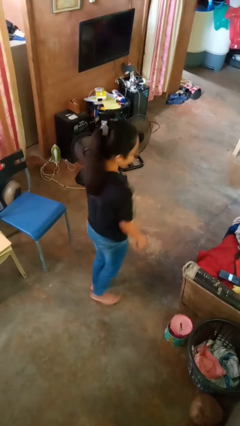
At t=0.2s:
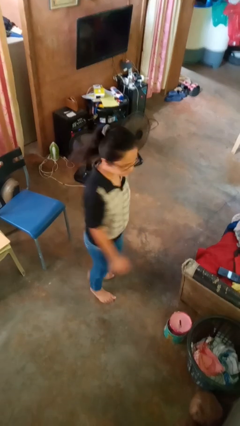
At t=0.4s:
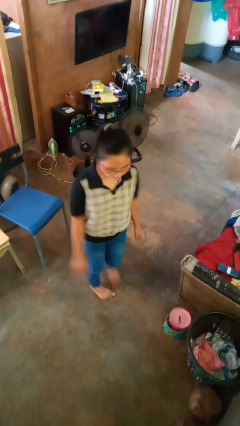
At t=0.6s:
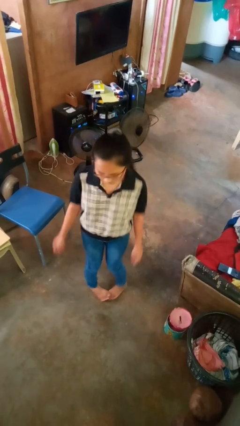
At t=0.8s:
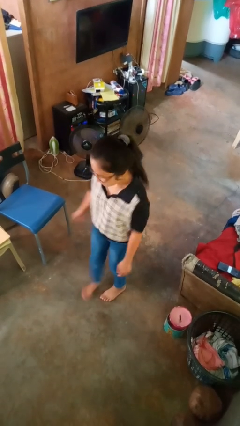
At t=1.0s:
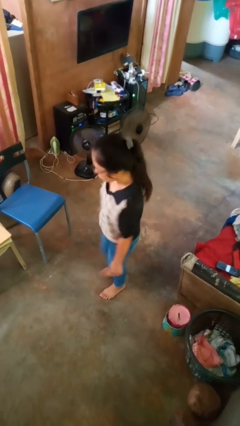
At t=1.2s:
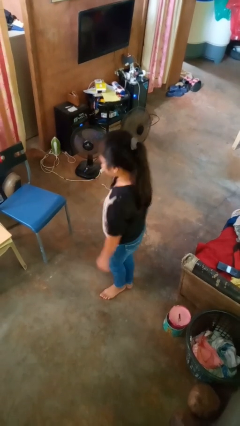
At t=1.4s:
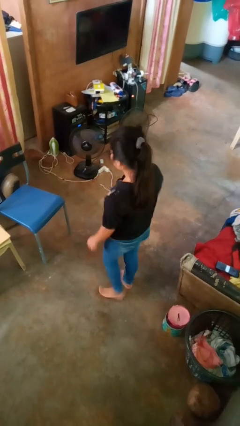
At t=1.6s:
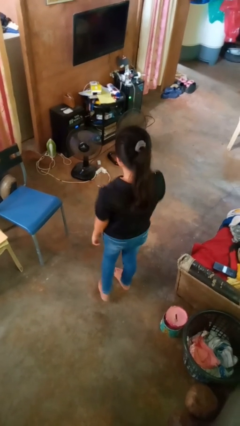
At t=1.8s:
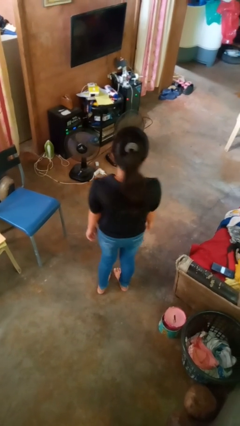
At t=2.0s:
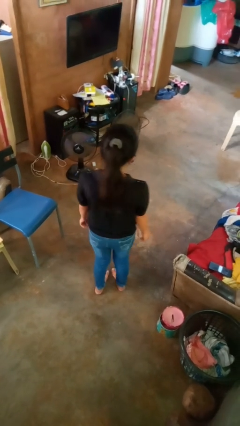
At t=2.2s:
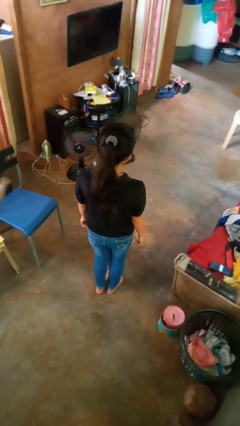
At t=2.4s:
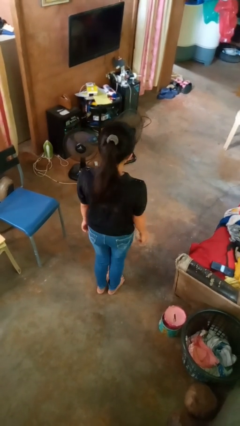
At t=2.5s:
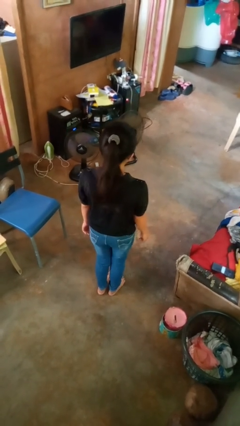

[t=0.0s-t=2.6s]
person twirls

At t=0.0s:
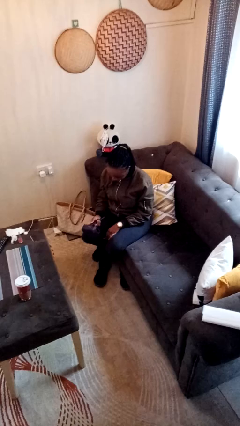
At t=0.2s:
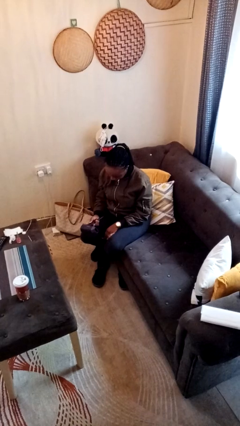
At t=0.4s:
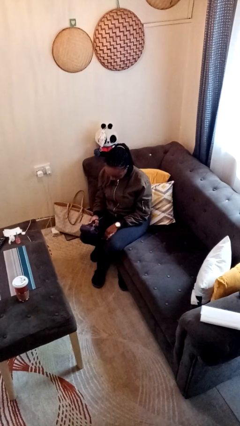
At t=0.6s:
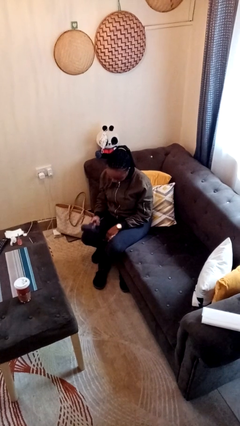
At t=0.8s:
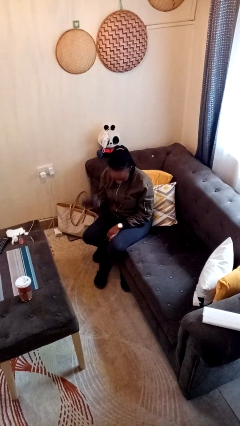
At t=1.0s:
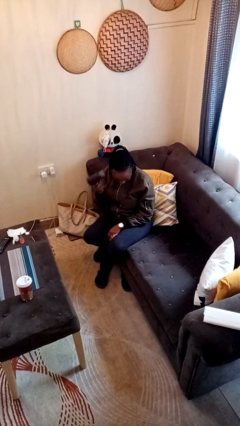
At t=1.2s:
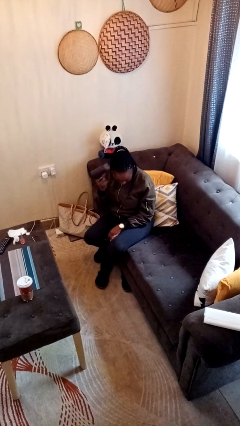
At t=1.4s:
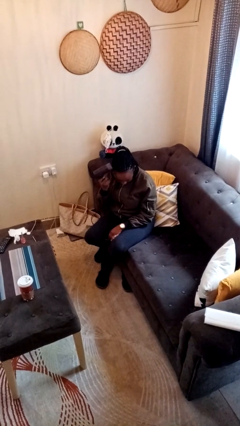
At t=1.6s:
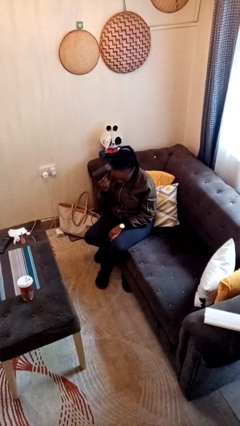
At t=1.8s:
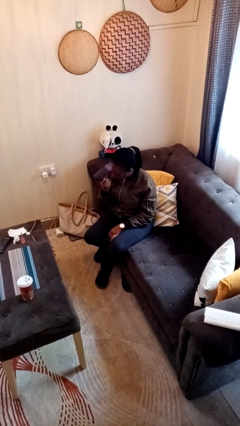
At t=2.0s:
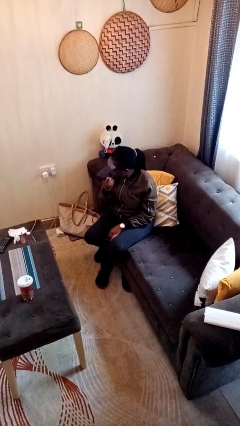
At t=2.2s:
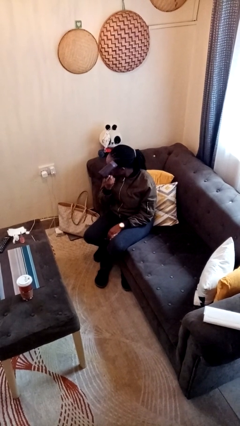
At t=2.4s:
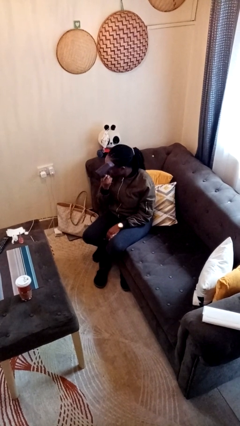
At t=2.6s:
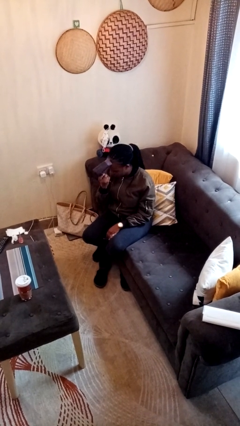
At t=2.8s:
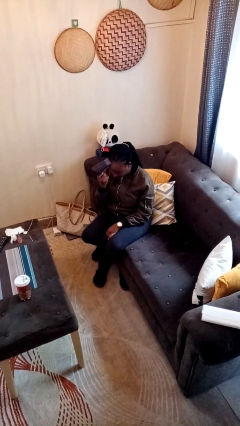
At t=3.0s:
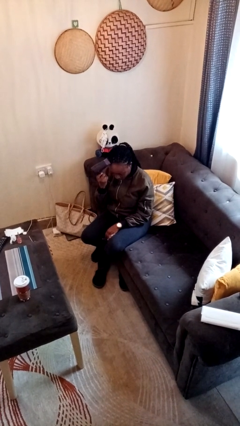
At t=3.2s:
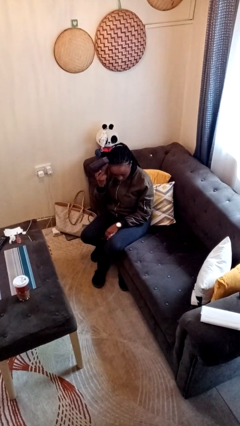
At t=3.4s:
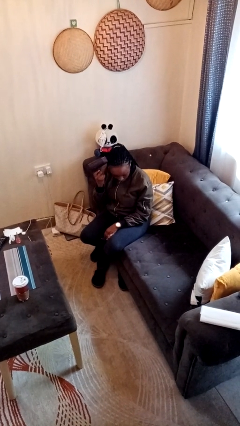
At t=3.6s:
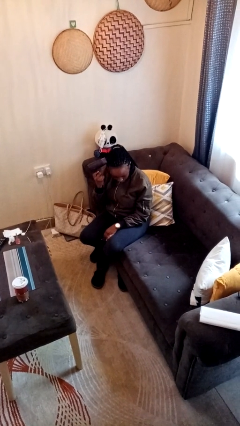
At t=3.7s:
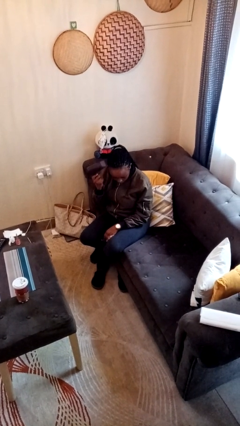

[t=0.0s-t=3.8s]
person dries hair with hairdryer

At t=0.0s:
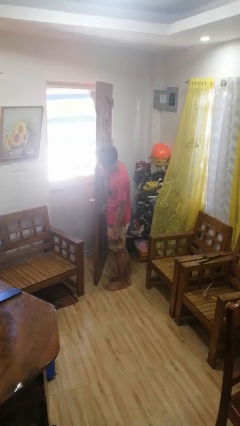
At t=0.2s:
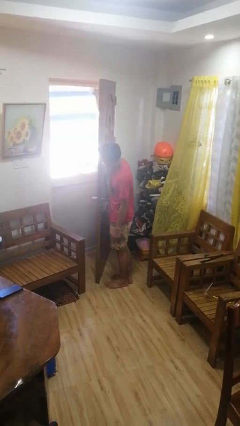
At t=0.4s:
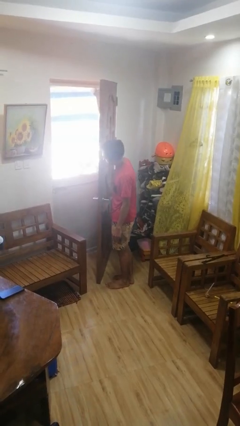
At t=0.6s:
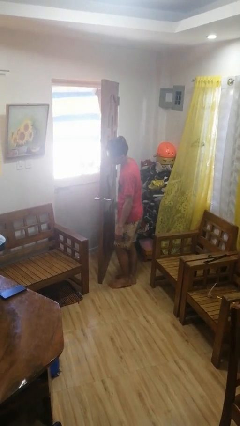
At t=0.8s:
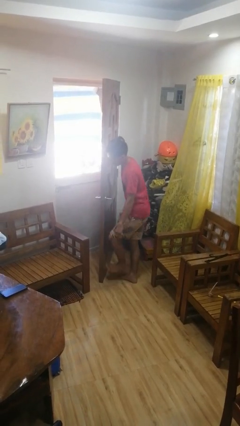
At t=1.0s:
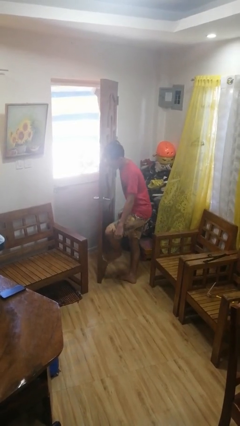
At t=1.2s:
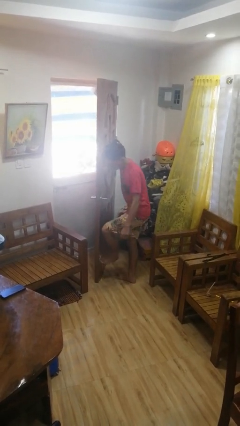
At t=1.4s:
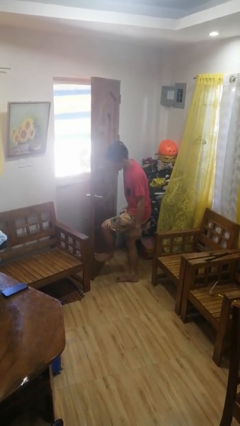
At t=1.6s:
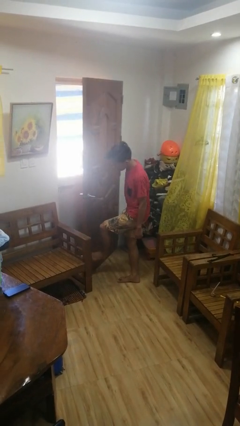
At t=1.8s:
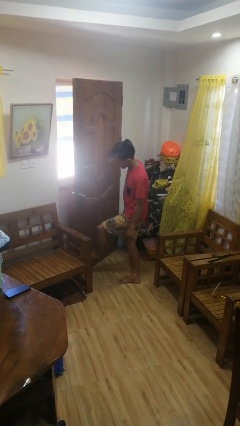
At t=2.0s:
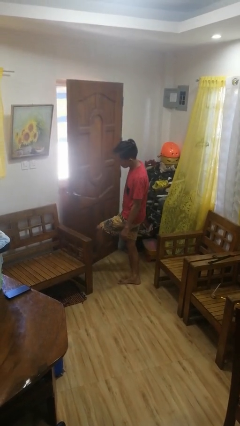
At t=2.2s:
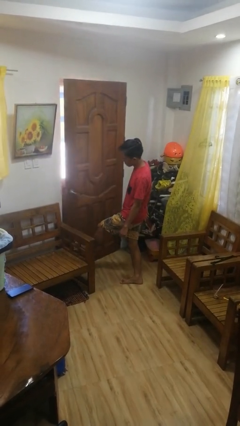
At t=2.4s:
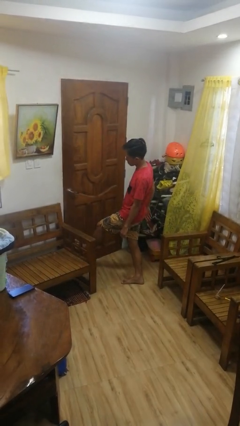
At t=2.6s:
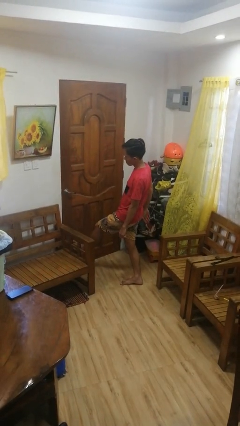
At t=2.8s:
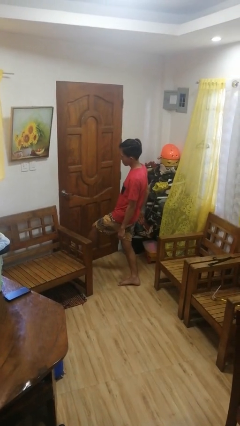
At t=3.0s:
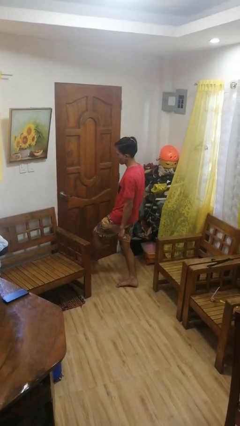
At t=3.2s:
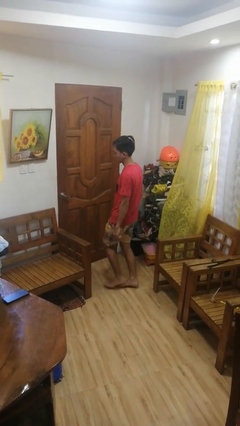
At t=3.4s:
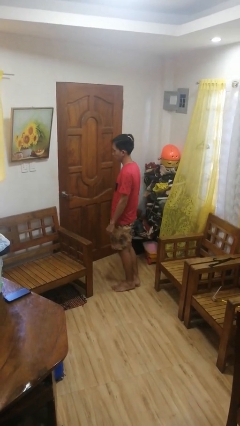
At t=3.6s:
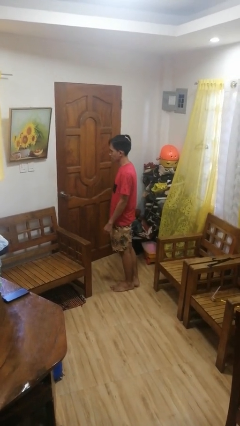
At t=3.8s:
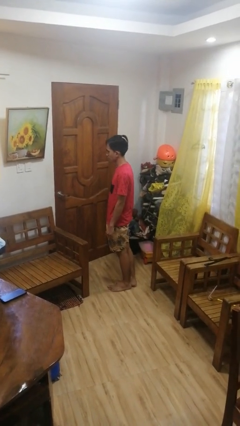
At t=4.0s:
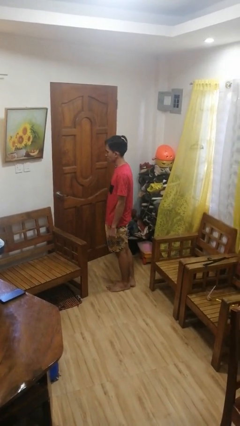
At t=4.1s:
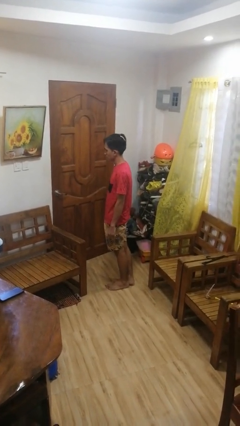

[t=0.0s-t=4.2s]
person closes door with foot

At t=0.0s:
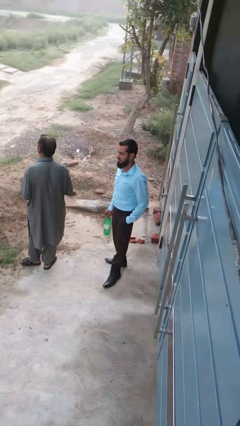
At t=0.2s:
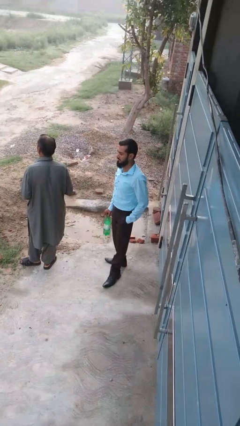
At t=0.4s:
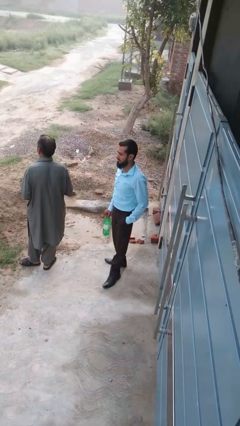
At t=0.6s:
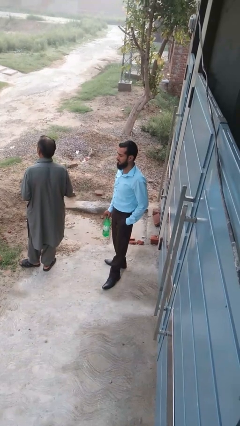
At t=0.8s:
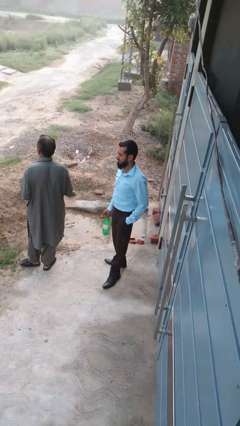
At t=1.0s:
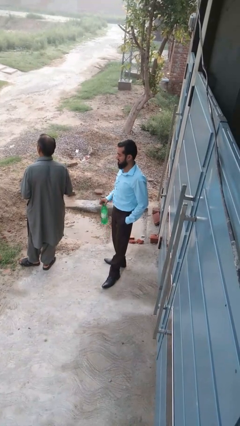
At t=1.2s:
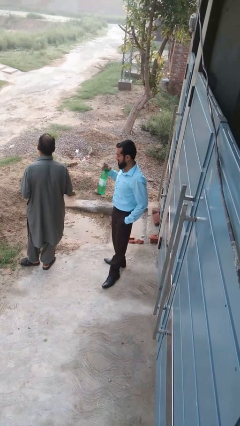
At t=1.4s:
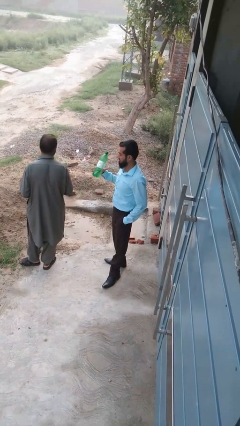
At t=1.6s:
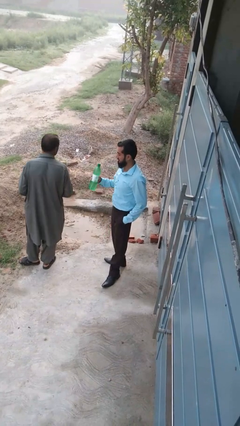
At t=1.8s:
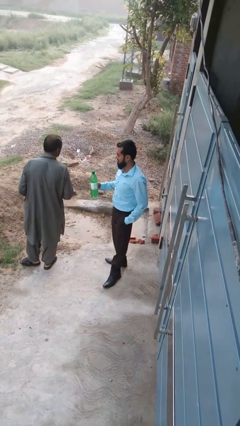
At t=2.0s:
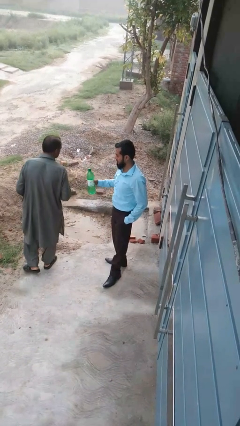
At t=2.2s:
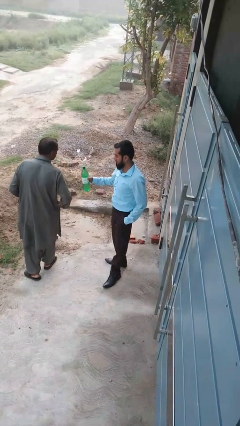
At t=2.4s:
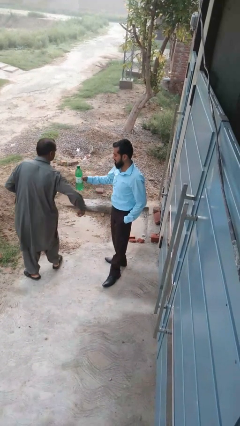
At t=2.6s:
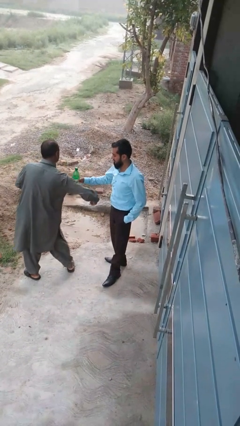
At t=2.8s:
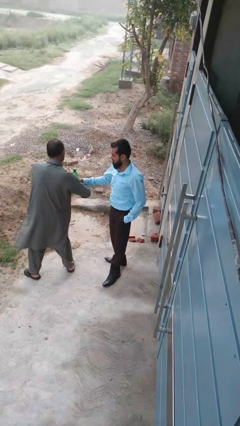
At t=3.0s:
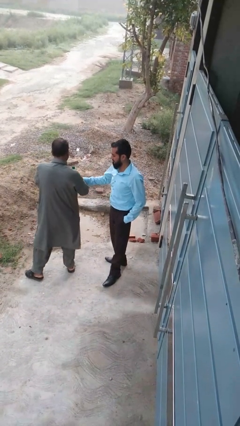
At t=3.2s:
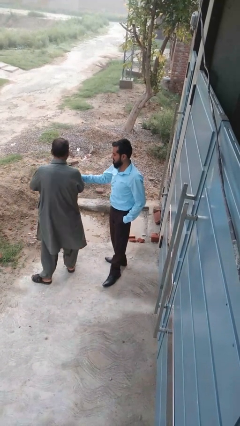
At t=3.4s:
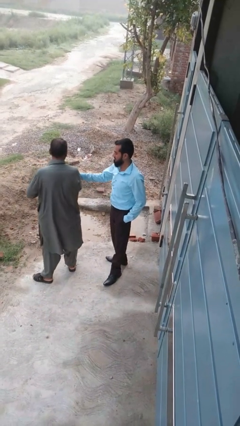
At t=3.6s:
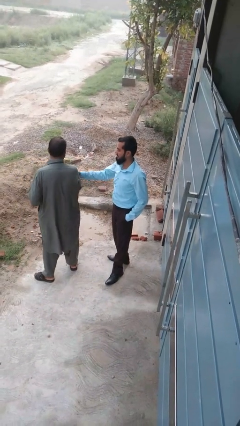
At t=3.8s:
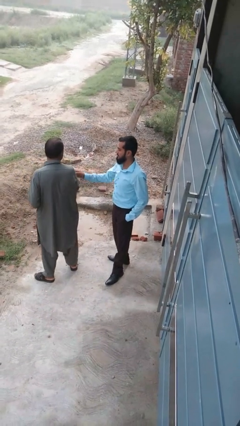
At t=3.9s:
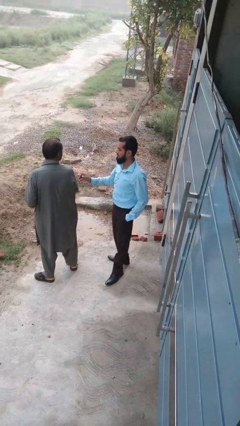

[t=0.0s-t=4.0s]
person transfers object to person

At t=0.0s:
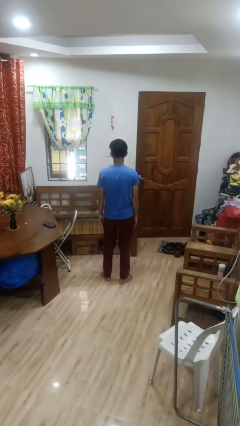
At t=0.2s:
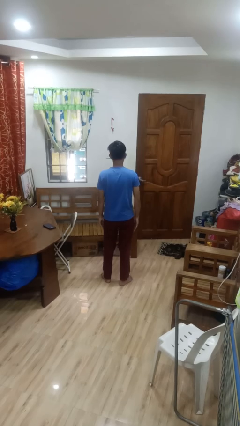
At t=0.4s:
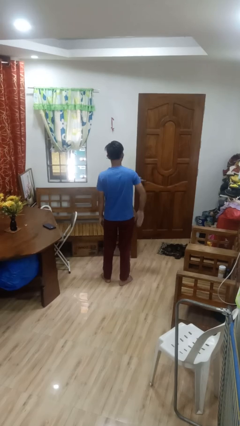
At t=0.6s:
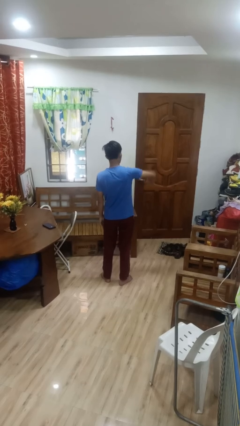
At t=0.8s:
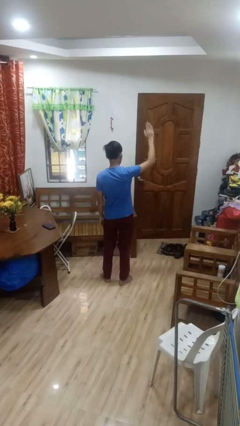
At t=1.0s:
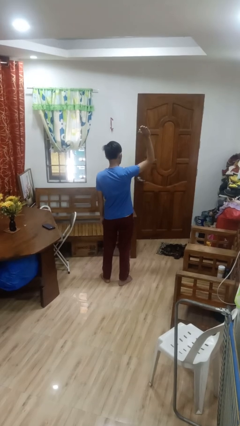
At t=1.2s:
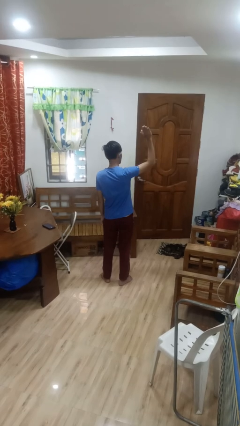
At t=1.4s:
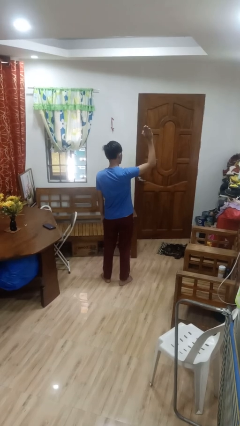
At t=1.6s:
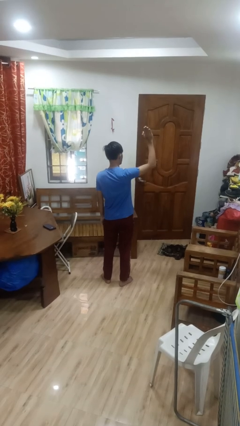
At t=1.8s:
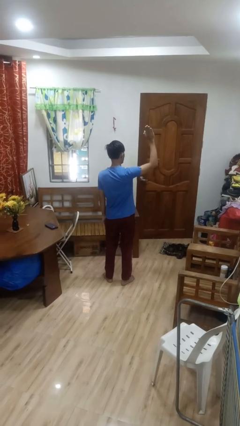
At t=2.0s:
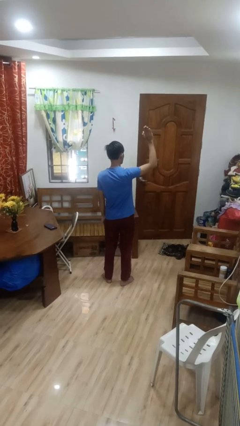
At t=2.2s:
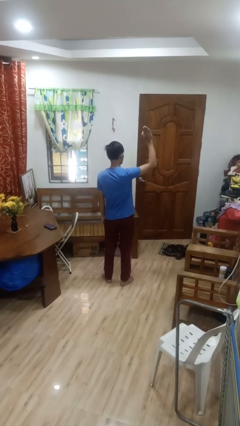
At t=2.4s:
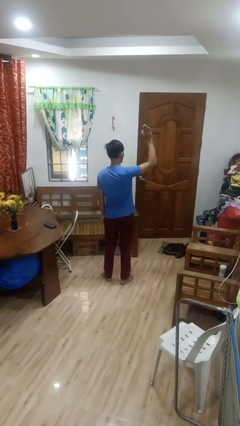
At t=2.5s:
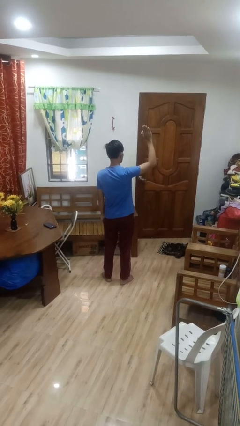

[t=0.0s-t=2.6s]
person gestures swipe up

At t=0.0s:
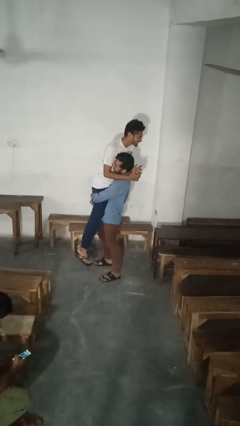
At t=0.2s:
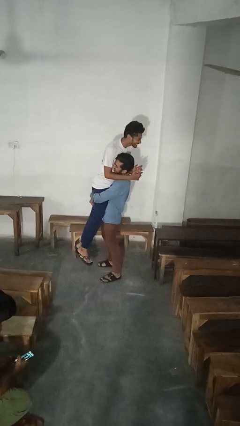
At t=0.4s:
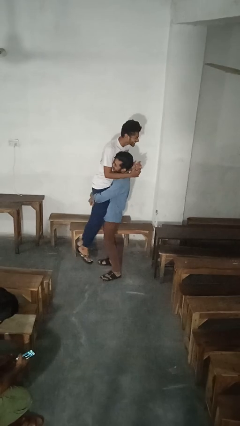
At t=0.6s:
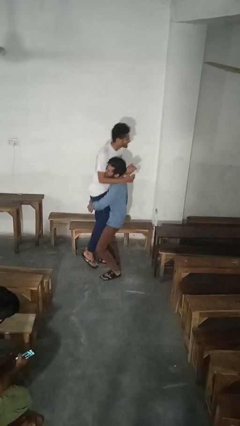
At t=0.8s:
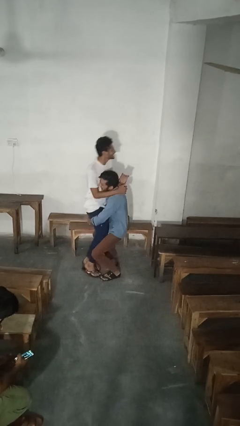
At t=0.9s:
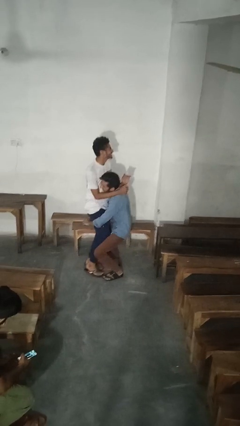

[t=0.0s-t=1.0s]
person puts down person
